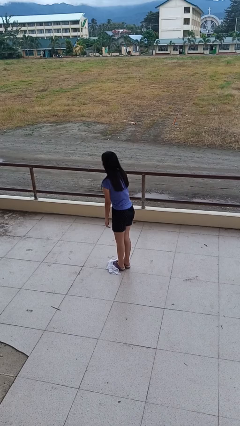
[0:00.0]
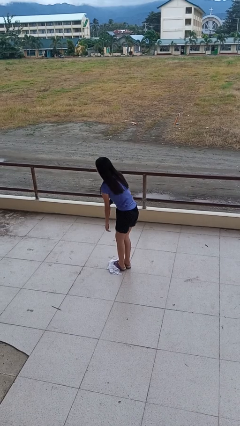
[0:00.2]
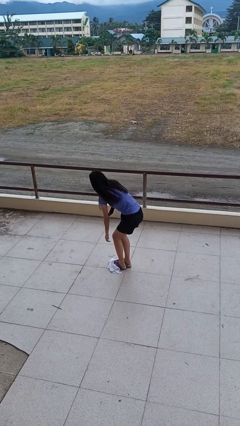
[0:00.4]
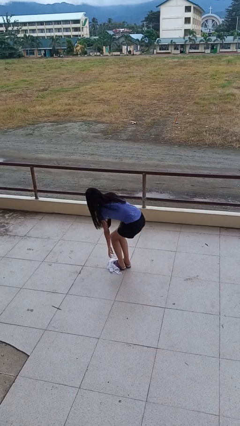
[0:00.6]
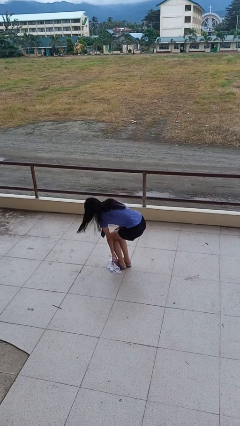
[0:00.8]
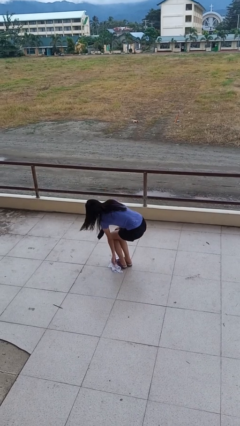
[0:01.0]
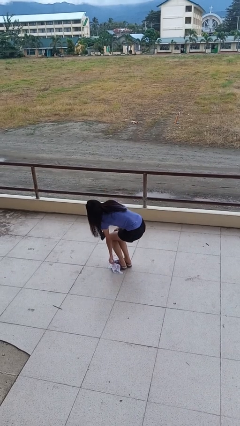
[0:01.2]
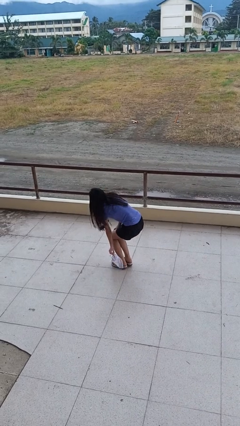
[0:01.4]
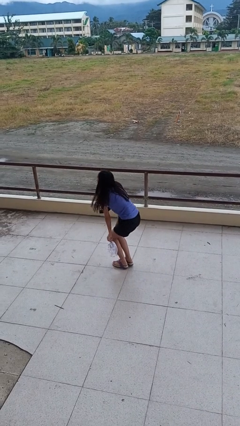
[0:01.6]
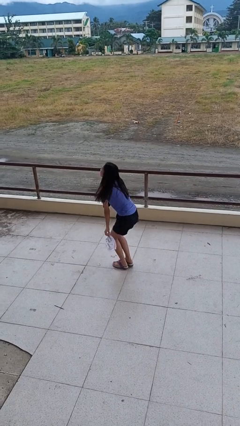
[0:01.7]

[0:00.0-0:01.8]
person picks up object from floor

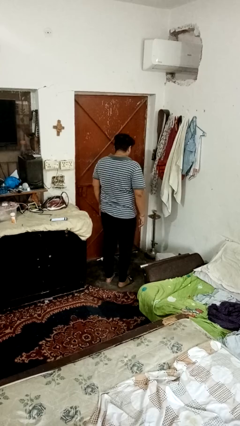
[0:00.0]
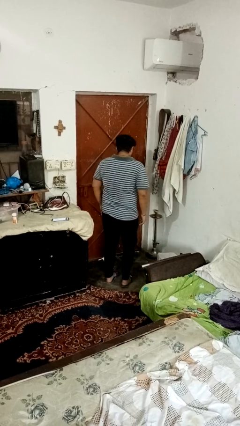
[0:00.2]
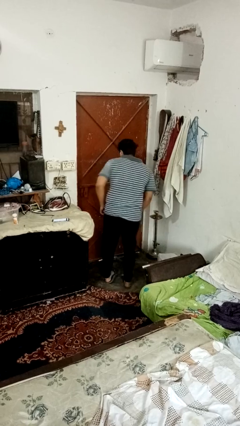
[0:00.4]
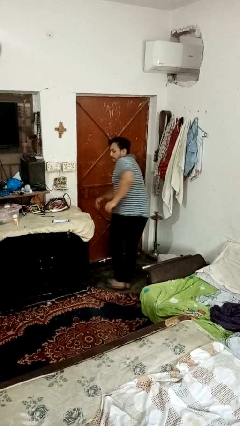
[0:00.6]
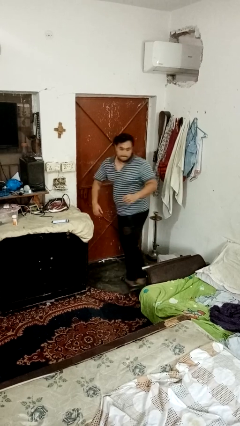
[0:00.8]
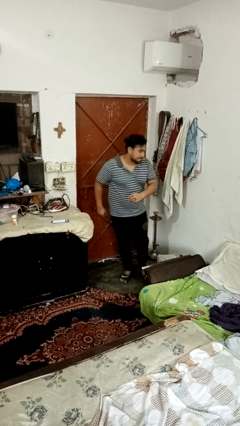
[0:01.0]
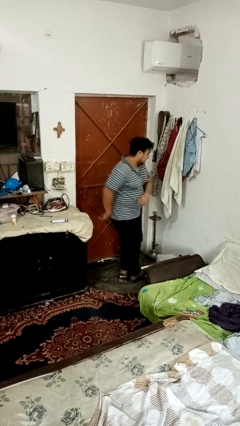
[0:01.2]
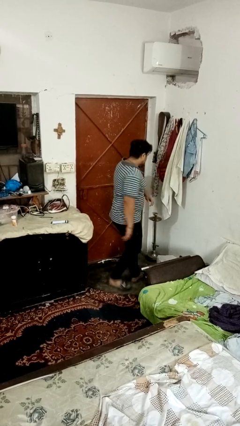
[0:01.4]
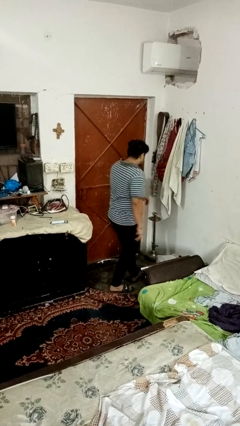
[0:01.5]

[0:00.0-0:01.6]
person twirls

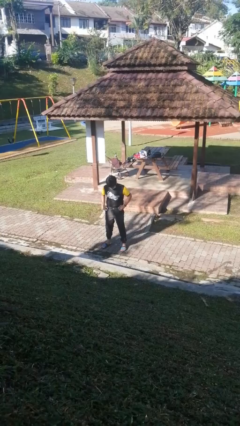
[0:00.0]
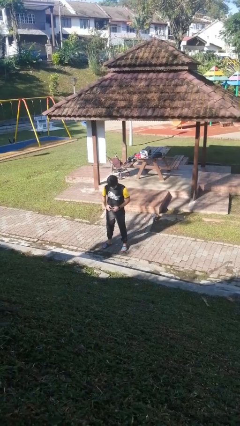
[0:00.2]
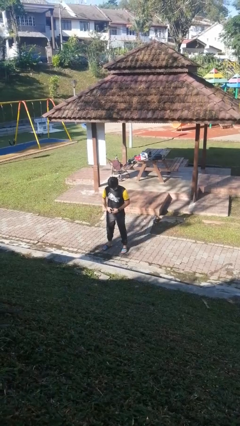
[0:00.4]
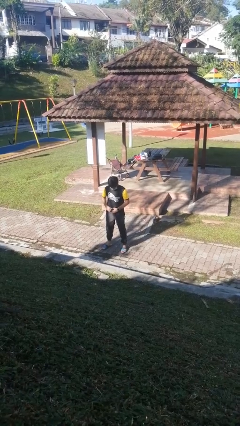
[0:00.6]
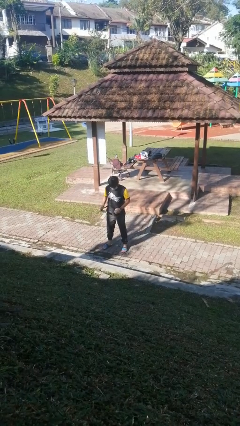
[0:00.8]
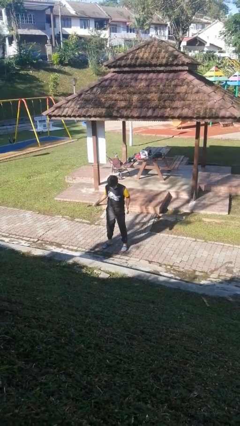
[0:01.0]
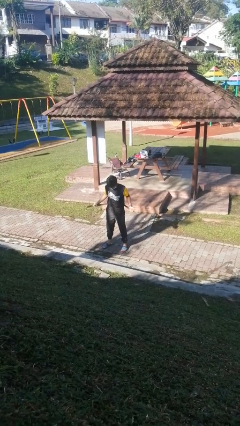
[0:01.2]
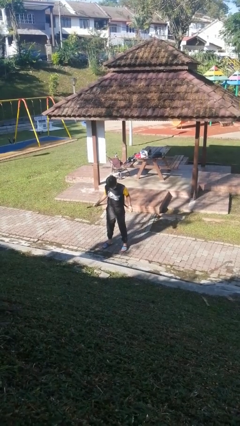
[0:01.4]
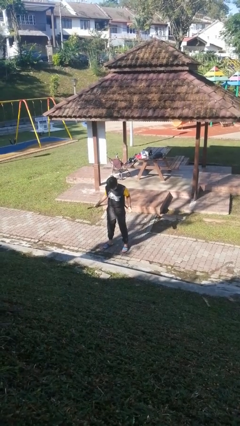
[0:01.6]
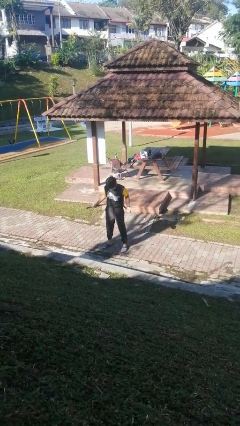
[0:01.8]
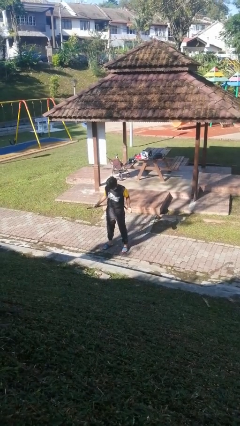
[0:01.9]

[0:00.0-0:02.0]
person takes off belt

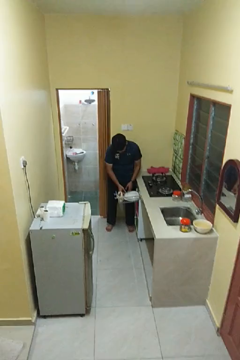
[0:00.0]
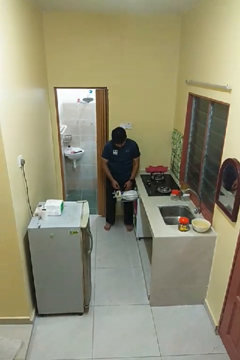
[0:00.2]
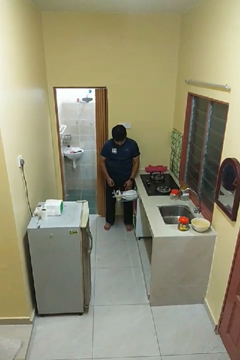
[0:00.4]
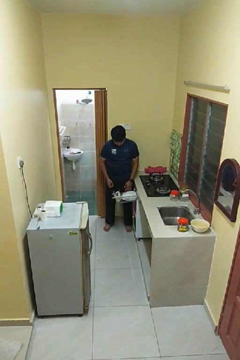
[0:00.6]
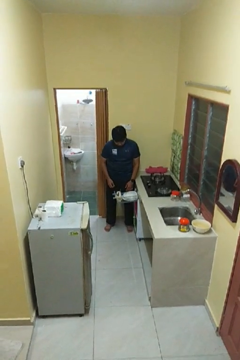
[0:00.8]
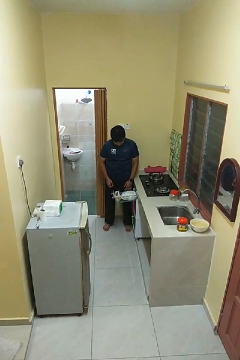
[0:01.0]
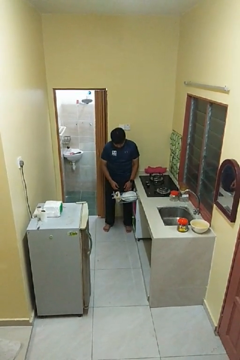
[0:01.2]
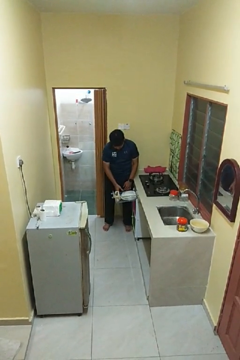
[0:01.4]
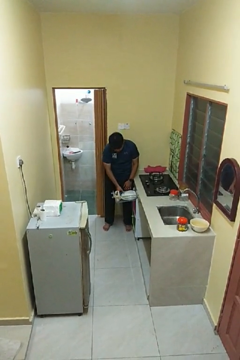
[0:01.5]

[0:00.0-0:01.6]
person searches in kitchen drawer

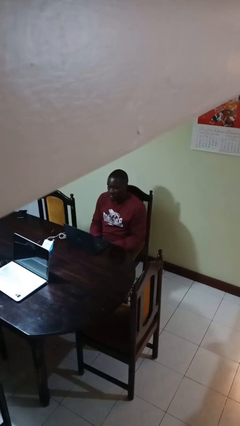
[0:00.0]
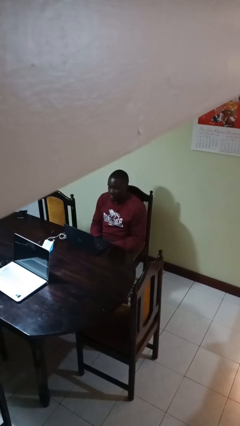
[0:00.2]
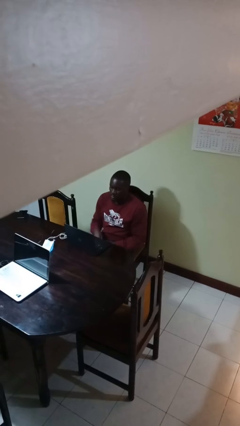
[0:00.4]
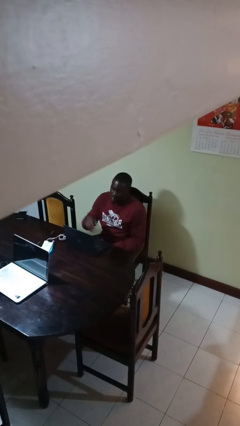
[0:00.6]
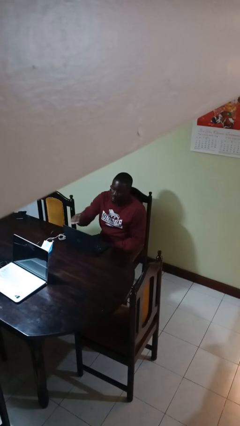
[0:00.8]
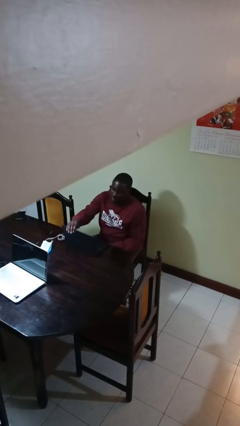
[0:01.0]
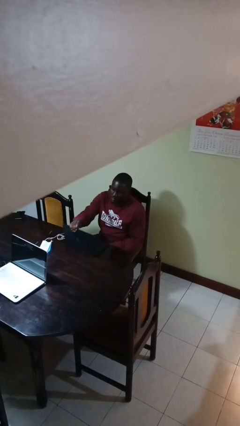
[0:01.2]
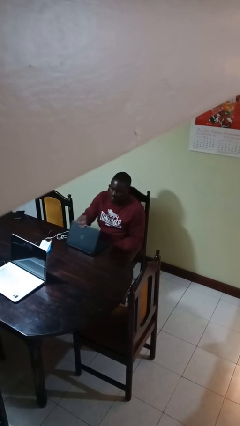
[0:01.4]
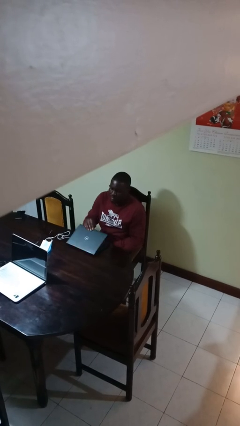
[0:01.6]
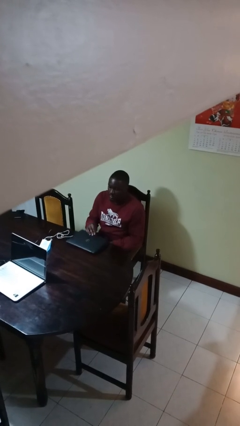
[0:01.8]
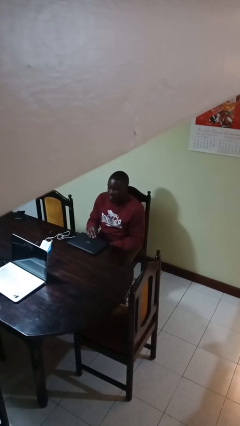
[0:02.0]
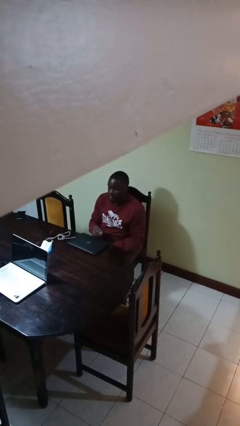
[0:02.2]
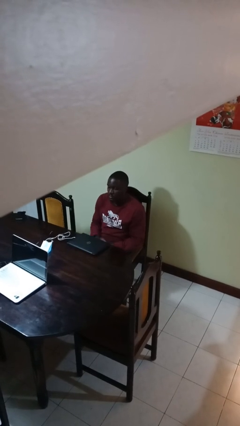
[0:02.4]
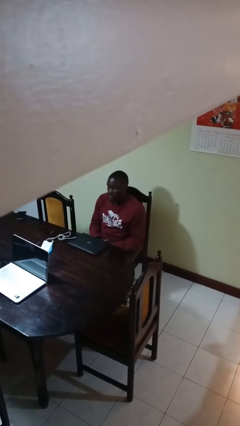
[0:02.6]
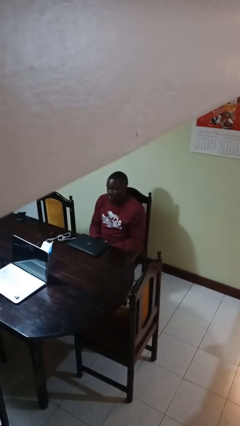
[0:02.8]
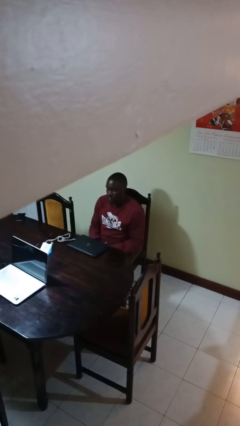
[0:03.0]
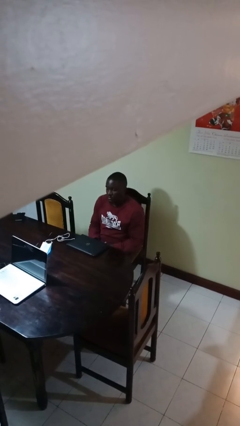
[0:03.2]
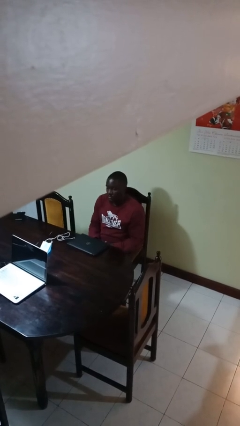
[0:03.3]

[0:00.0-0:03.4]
person closes laptop

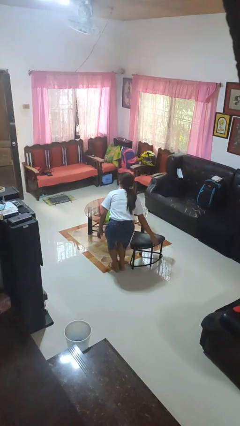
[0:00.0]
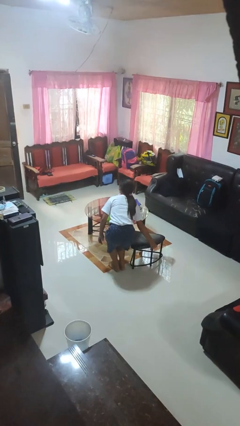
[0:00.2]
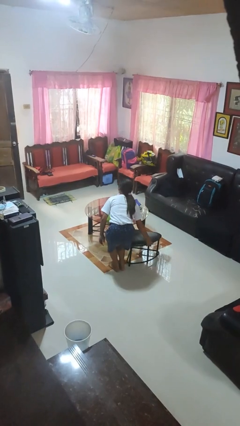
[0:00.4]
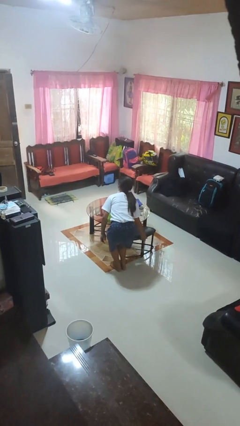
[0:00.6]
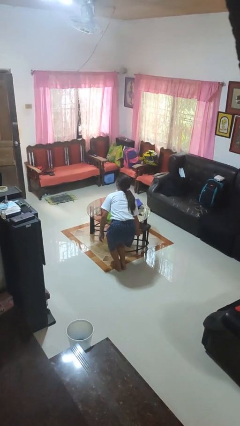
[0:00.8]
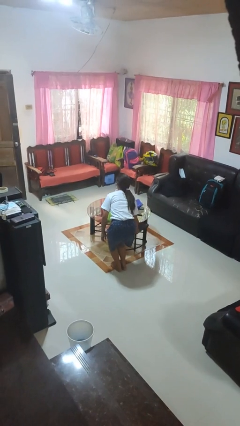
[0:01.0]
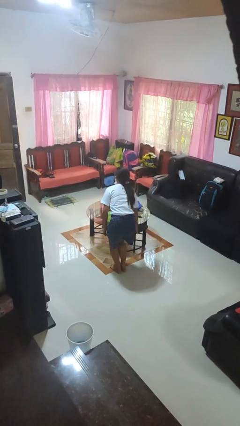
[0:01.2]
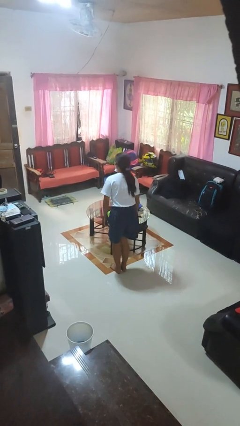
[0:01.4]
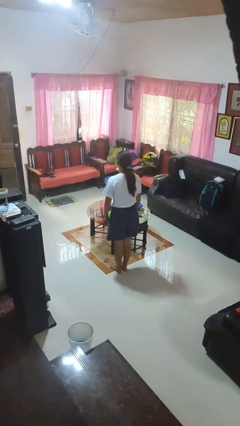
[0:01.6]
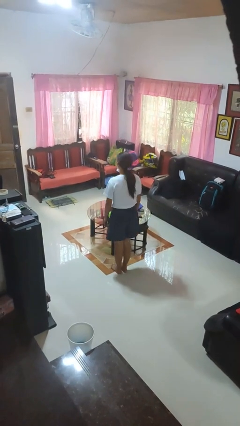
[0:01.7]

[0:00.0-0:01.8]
person pushes in chair

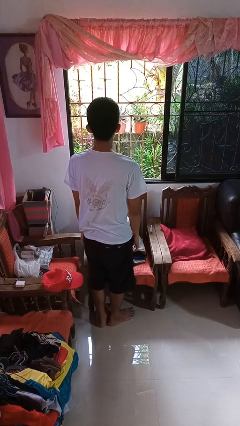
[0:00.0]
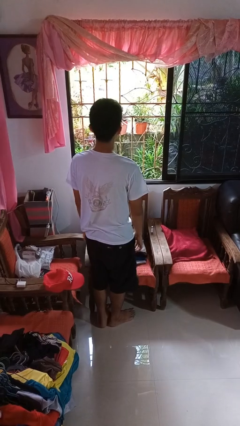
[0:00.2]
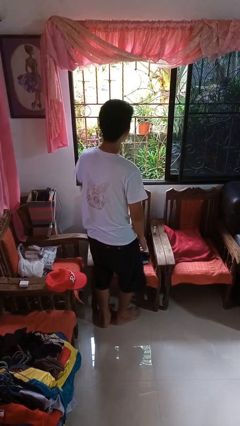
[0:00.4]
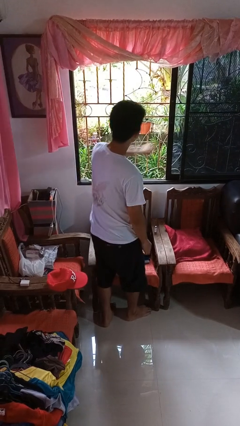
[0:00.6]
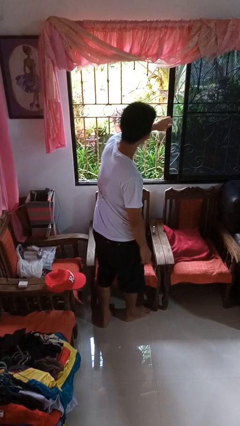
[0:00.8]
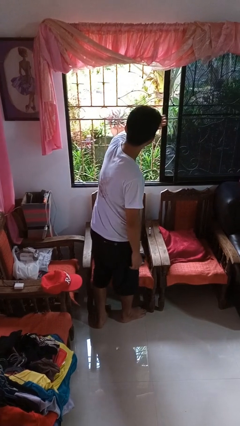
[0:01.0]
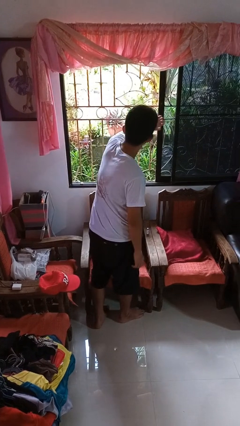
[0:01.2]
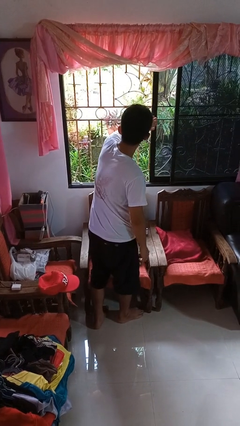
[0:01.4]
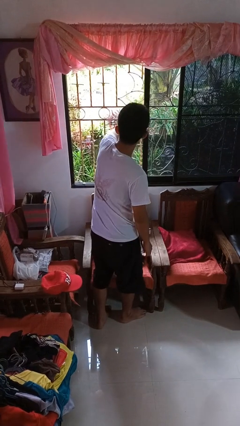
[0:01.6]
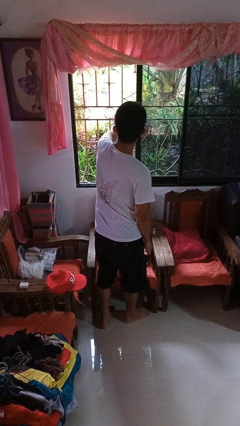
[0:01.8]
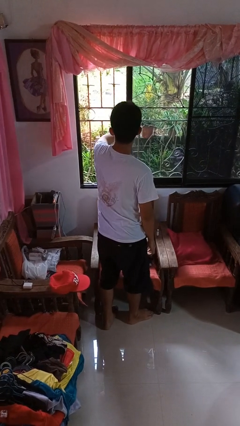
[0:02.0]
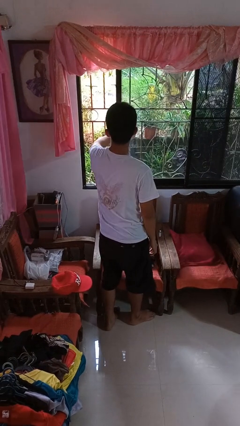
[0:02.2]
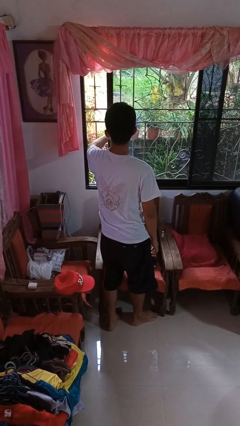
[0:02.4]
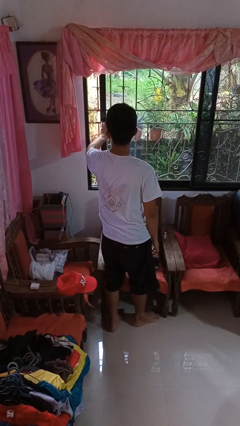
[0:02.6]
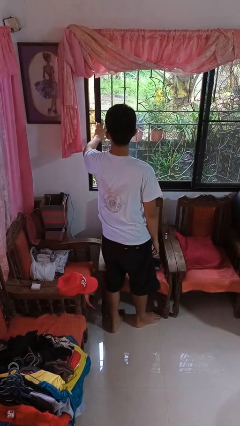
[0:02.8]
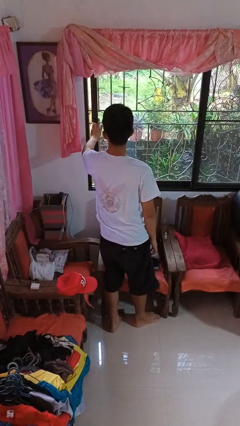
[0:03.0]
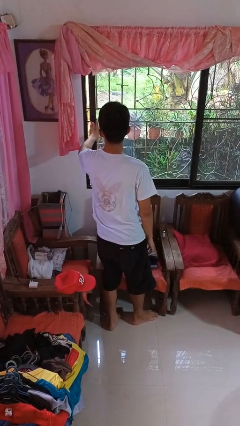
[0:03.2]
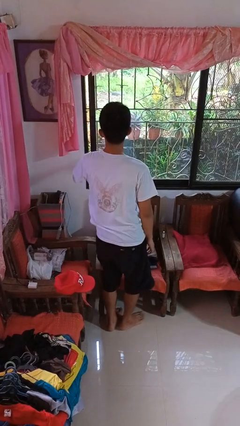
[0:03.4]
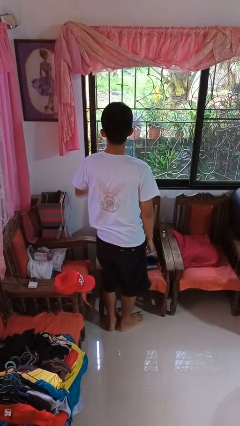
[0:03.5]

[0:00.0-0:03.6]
person closes home window

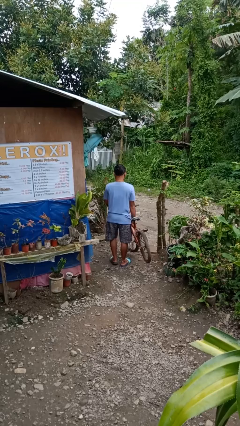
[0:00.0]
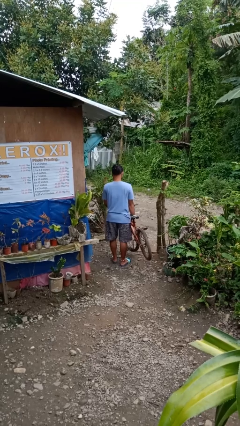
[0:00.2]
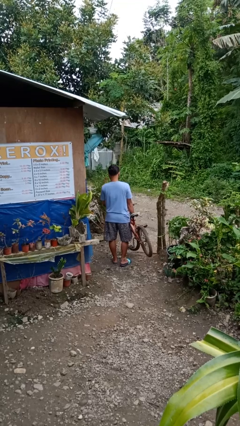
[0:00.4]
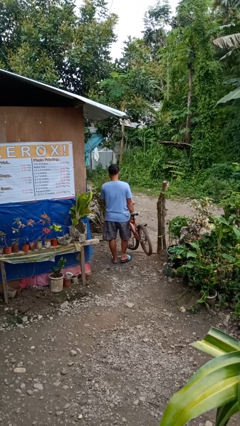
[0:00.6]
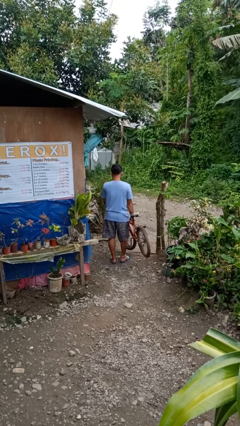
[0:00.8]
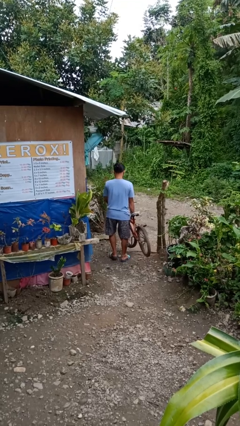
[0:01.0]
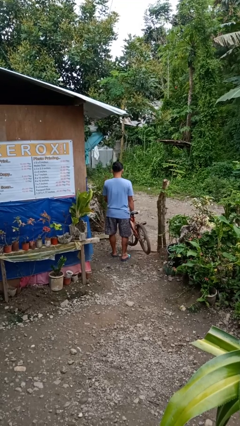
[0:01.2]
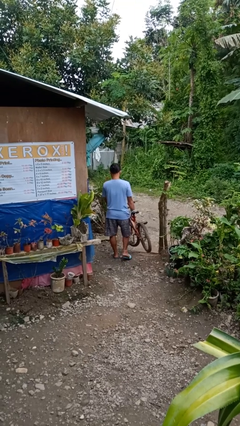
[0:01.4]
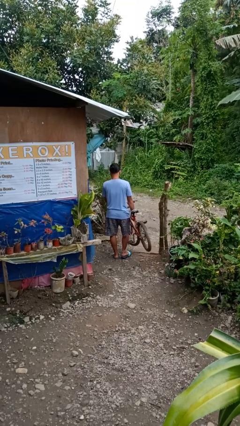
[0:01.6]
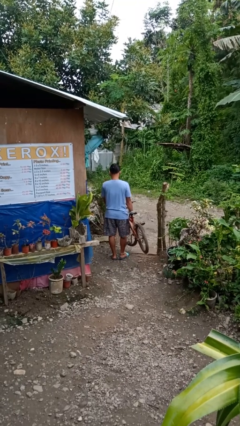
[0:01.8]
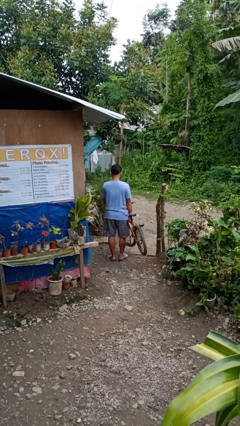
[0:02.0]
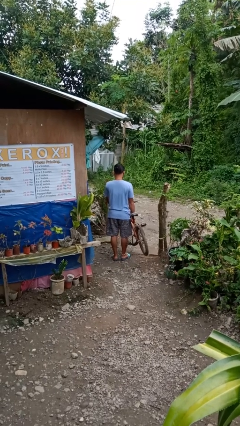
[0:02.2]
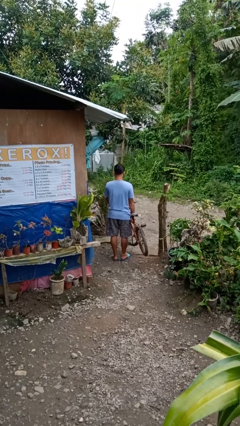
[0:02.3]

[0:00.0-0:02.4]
person carries bicycle
